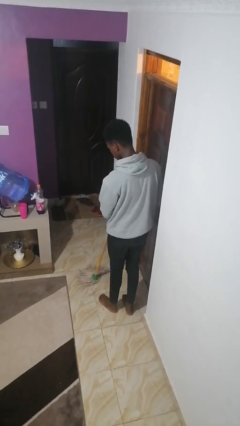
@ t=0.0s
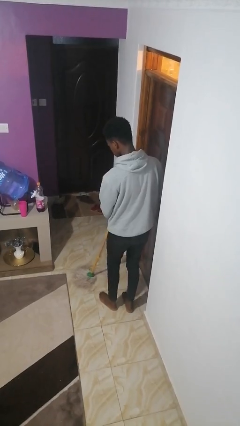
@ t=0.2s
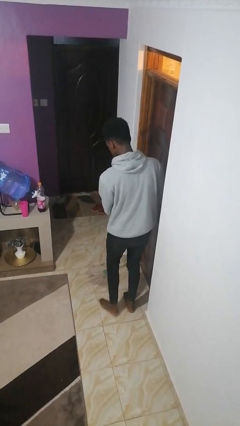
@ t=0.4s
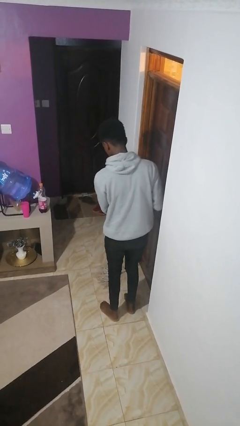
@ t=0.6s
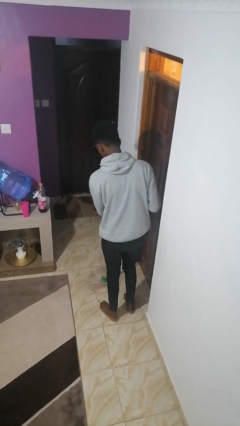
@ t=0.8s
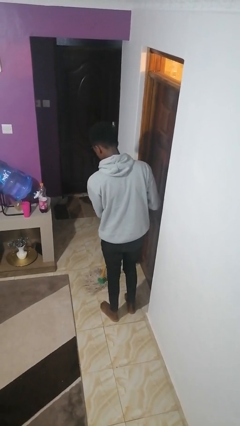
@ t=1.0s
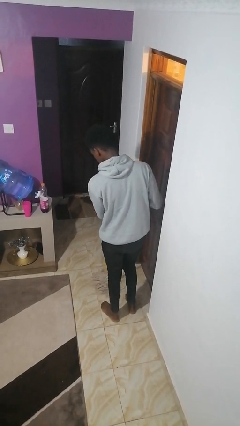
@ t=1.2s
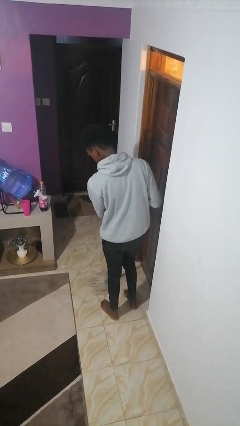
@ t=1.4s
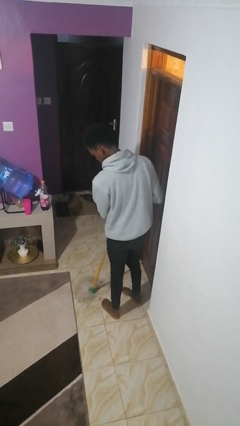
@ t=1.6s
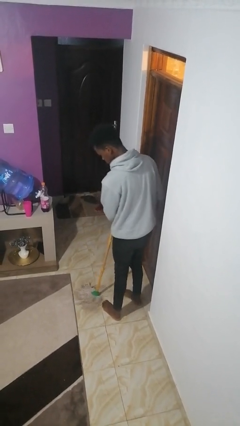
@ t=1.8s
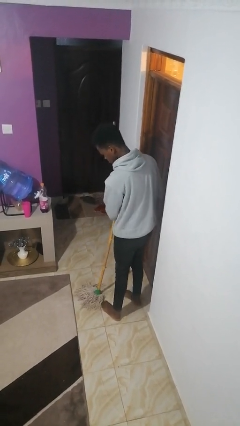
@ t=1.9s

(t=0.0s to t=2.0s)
person mops

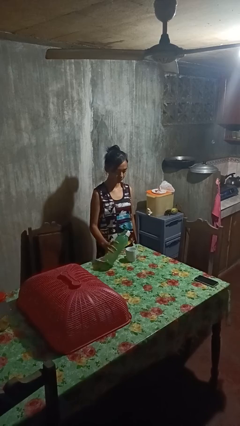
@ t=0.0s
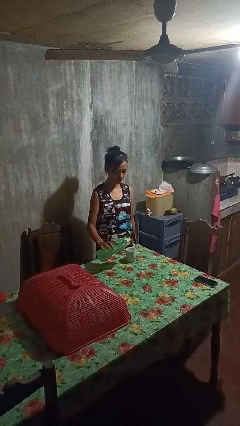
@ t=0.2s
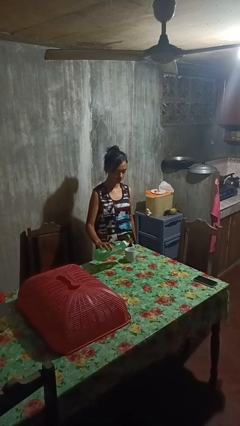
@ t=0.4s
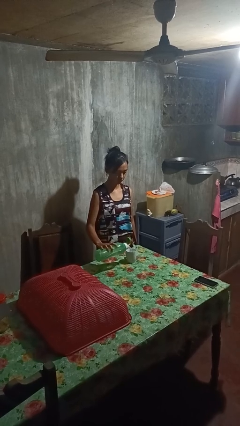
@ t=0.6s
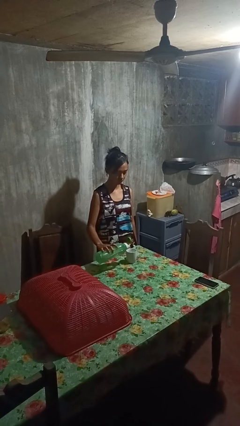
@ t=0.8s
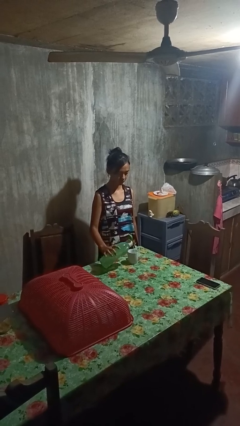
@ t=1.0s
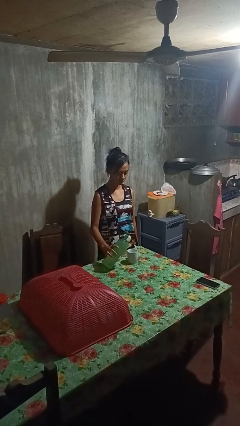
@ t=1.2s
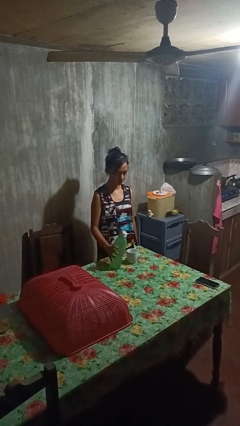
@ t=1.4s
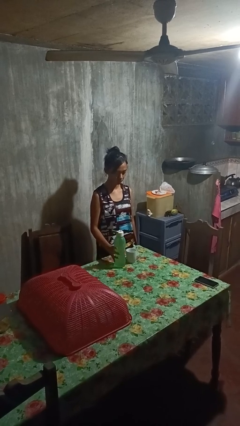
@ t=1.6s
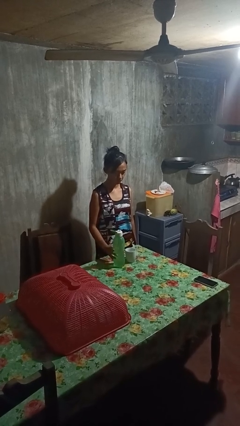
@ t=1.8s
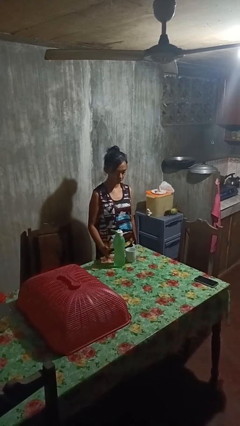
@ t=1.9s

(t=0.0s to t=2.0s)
person pours liquid into cup

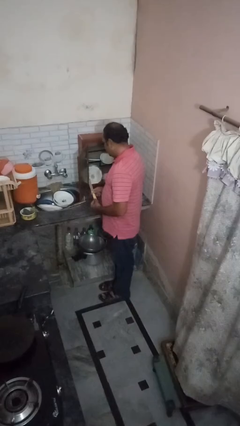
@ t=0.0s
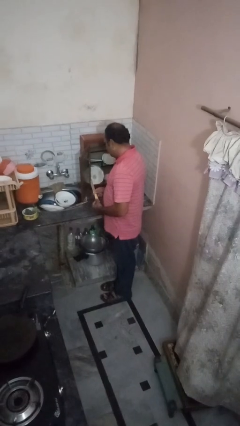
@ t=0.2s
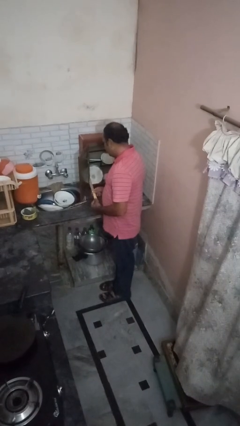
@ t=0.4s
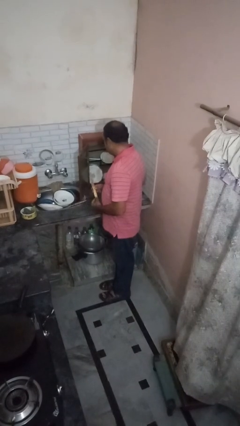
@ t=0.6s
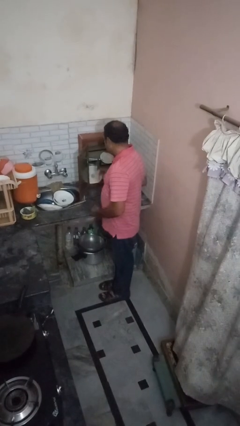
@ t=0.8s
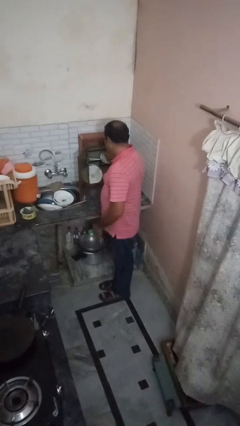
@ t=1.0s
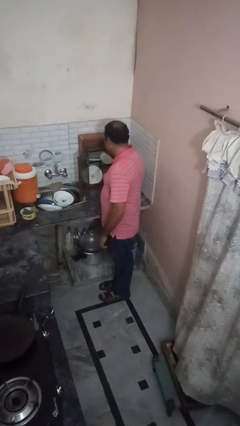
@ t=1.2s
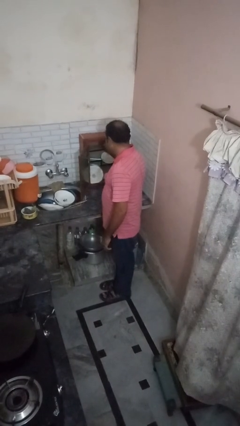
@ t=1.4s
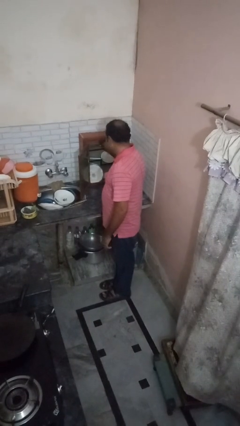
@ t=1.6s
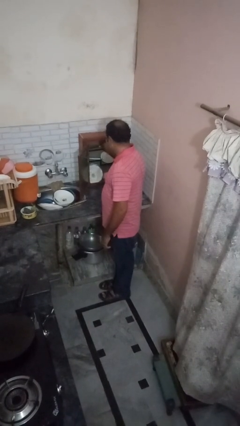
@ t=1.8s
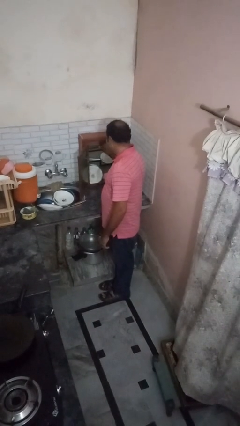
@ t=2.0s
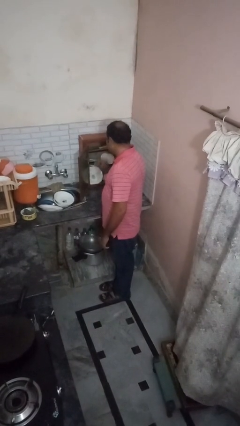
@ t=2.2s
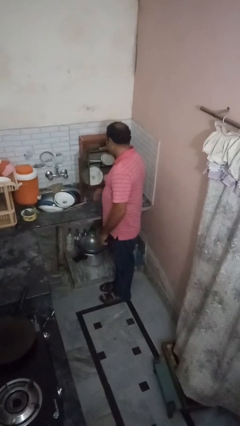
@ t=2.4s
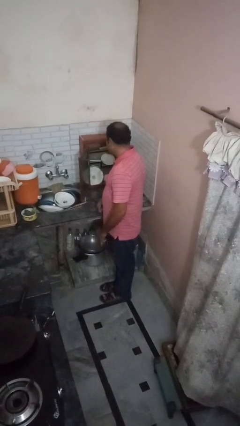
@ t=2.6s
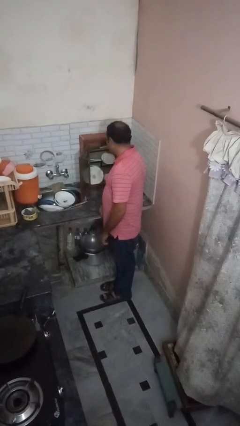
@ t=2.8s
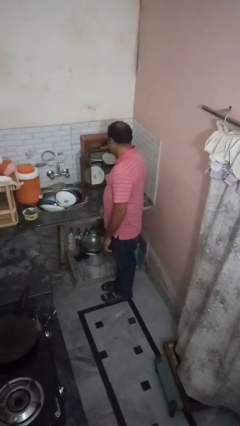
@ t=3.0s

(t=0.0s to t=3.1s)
person takes object from cabinet

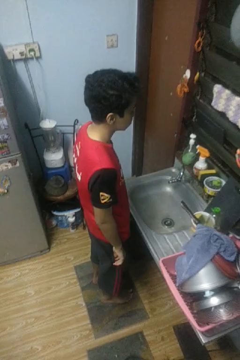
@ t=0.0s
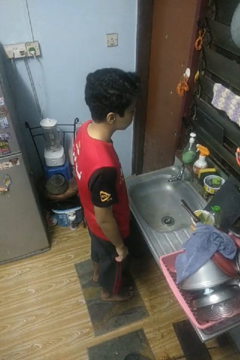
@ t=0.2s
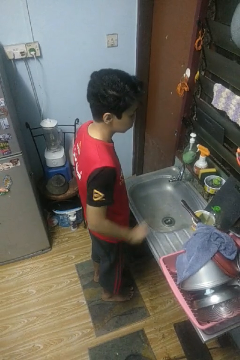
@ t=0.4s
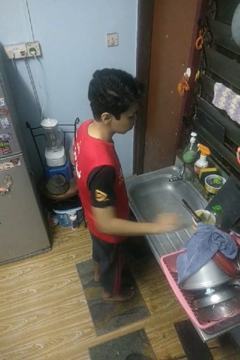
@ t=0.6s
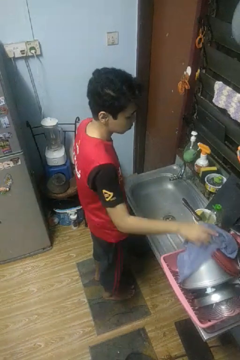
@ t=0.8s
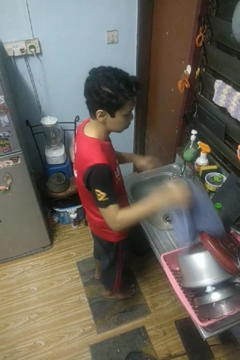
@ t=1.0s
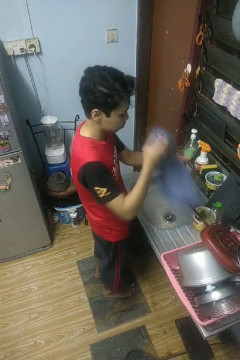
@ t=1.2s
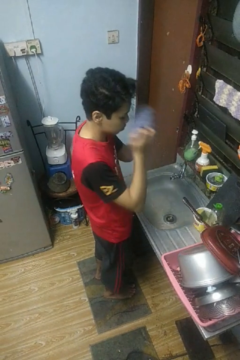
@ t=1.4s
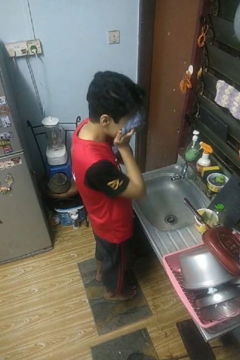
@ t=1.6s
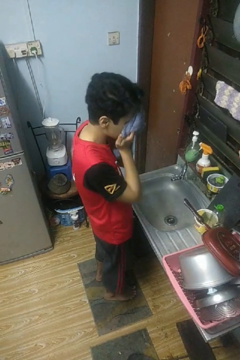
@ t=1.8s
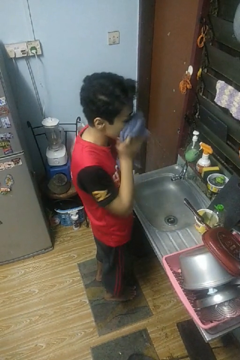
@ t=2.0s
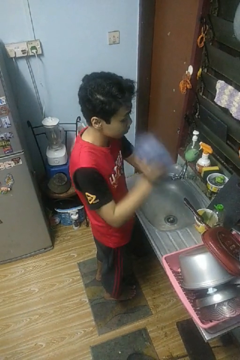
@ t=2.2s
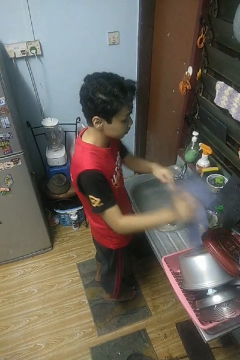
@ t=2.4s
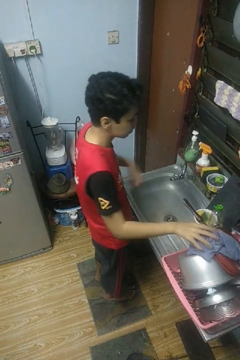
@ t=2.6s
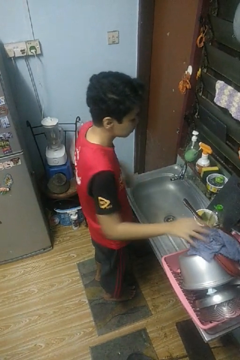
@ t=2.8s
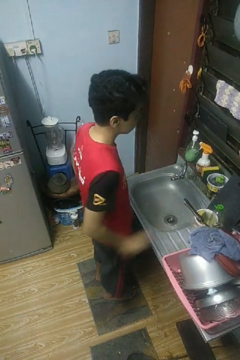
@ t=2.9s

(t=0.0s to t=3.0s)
person dries face with towel

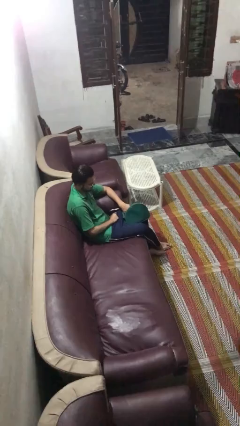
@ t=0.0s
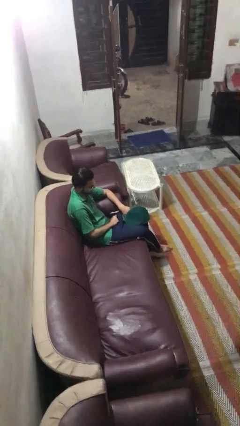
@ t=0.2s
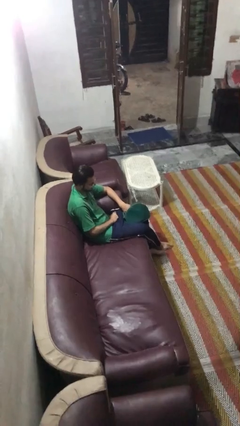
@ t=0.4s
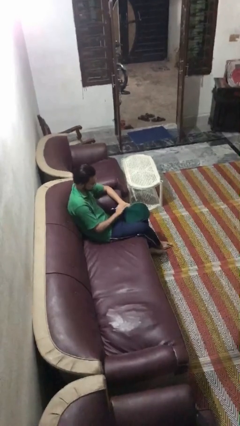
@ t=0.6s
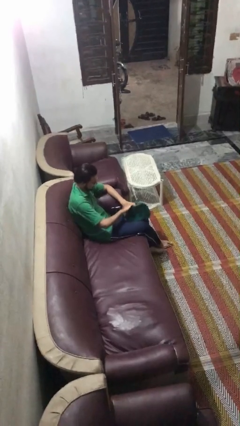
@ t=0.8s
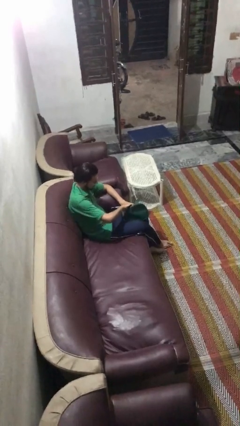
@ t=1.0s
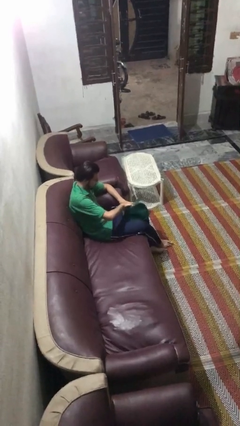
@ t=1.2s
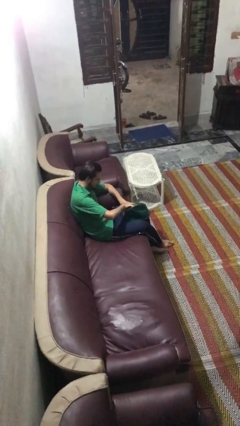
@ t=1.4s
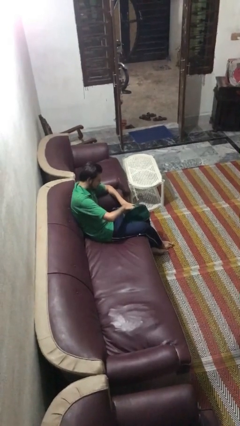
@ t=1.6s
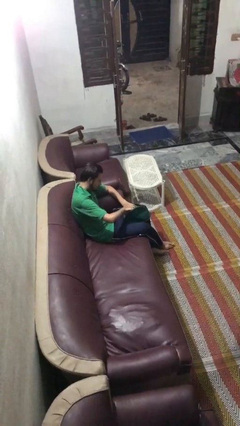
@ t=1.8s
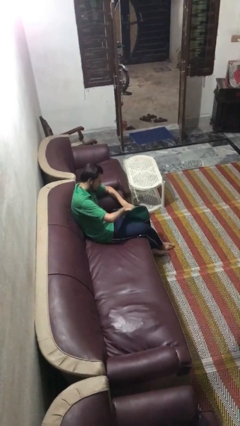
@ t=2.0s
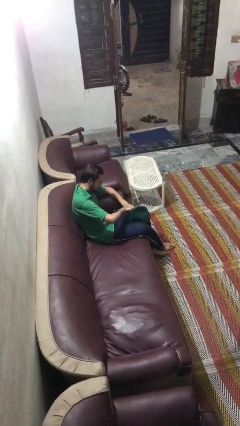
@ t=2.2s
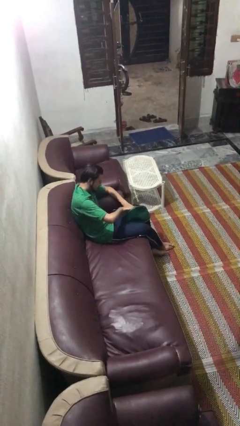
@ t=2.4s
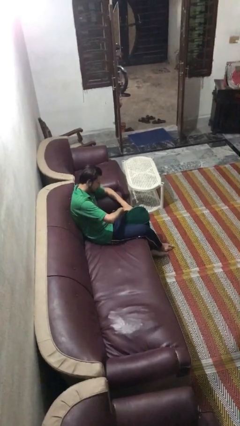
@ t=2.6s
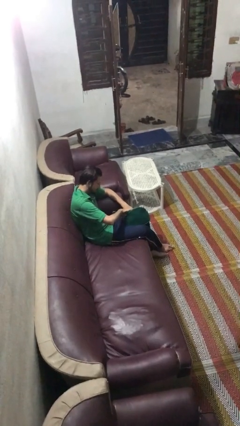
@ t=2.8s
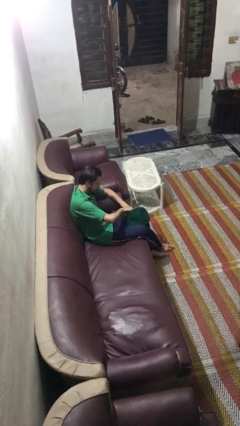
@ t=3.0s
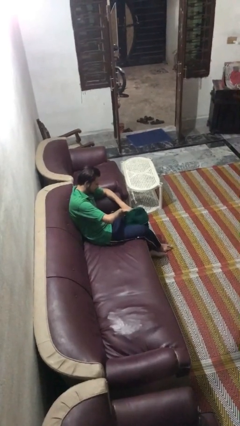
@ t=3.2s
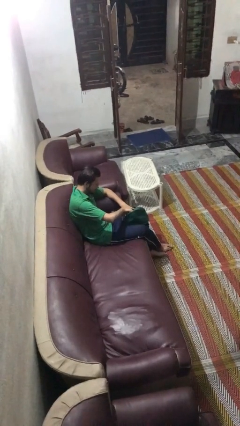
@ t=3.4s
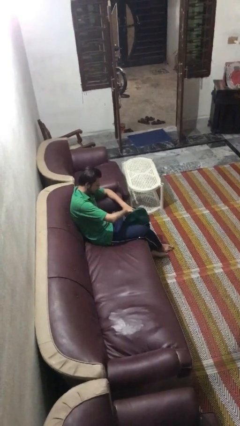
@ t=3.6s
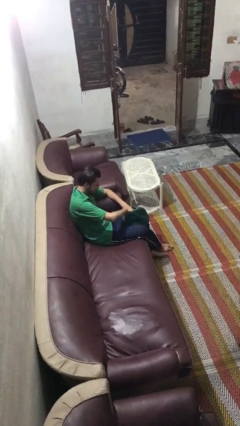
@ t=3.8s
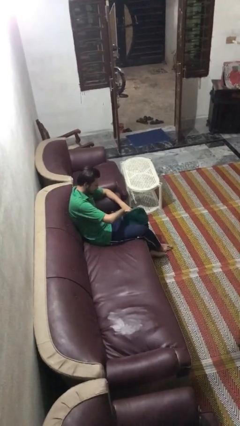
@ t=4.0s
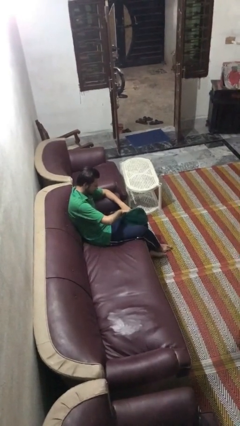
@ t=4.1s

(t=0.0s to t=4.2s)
person searches in purse

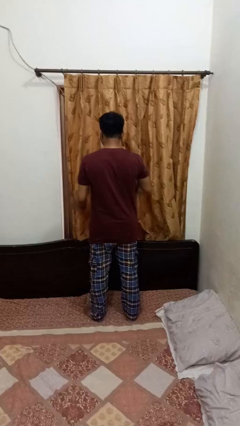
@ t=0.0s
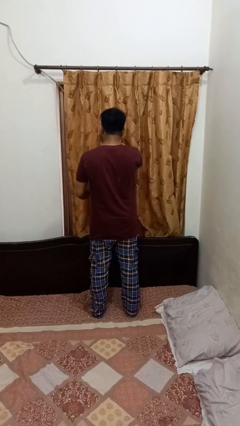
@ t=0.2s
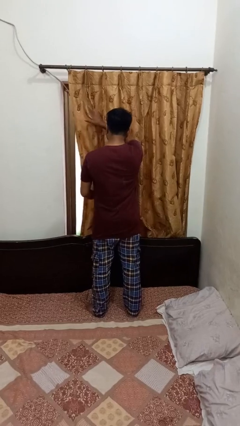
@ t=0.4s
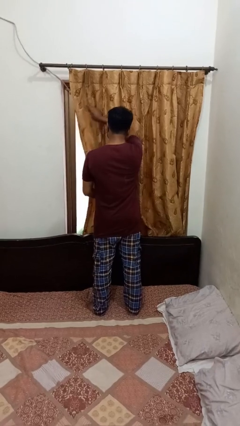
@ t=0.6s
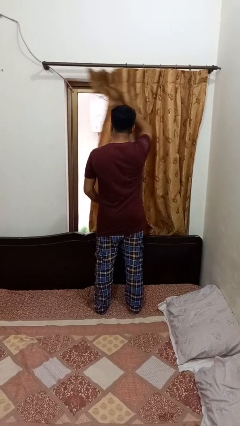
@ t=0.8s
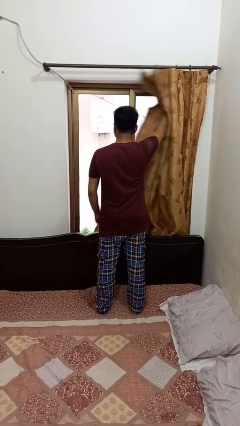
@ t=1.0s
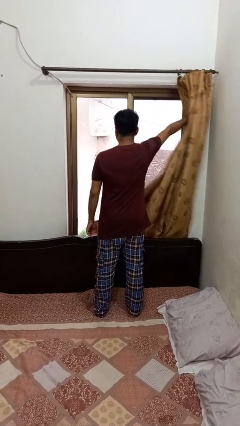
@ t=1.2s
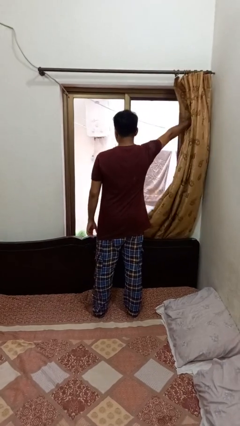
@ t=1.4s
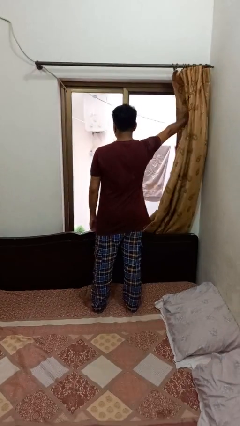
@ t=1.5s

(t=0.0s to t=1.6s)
person opens curtains

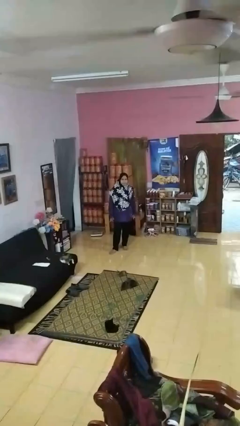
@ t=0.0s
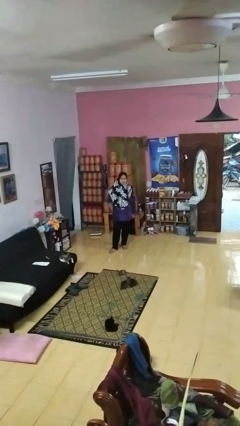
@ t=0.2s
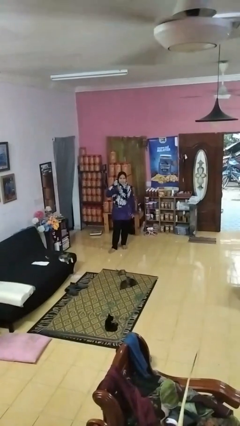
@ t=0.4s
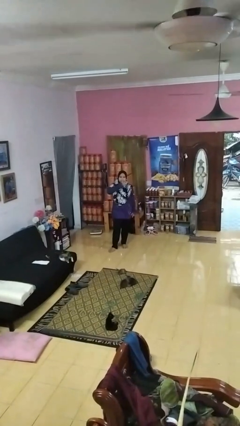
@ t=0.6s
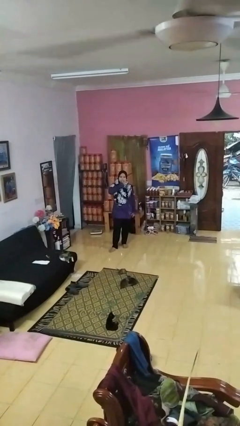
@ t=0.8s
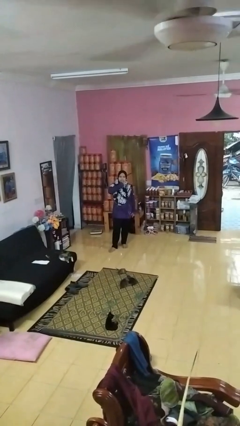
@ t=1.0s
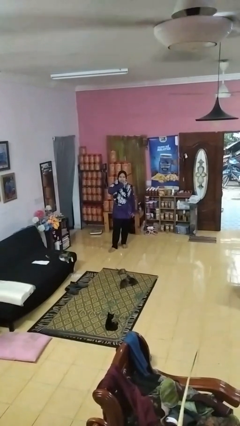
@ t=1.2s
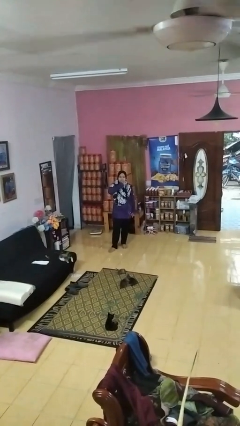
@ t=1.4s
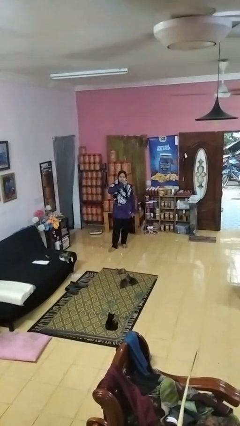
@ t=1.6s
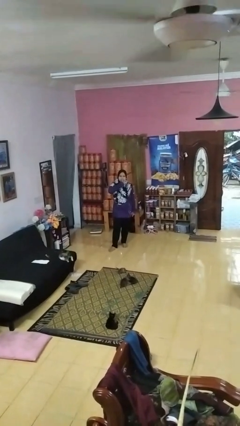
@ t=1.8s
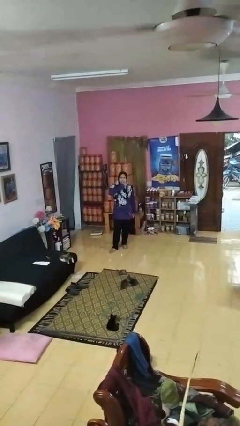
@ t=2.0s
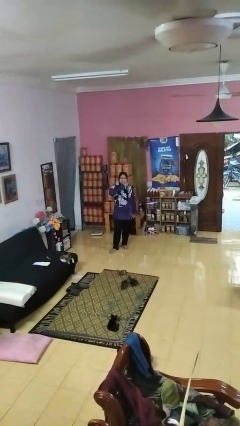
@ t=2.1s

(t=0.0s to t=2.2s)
person gestures be quiet
